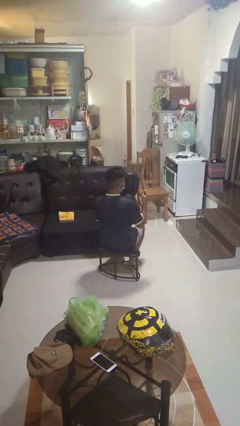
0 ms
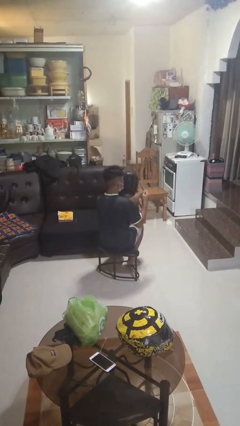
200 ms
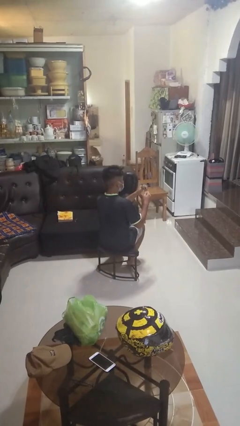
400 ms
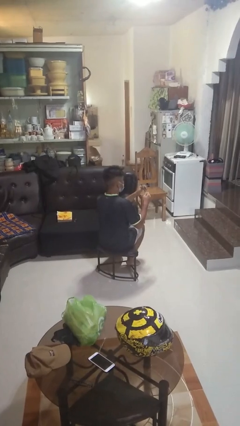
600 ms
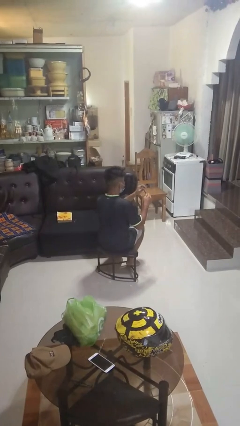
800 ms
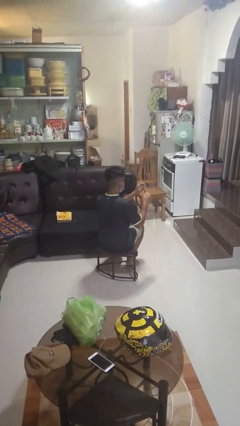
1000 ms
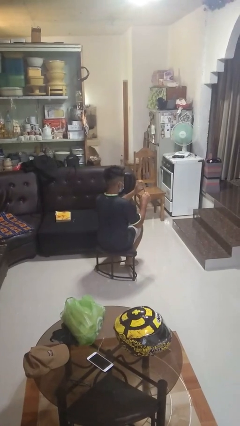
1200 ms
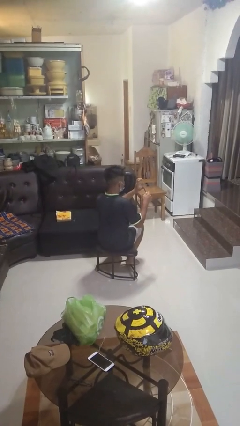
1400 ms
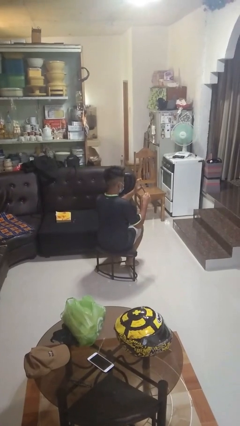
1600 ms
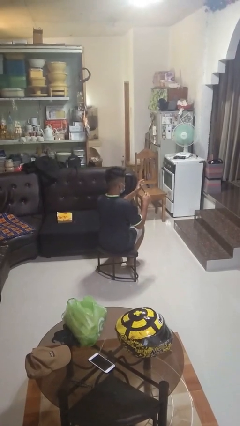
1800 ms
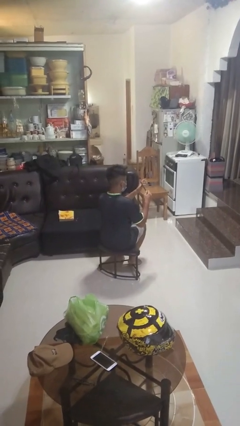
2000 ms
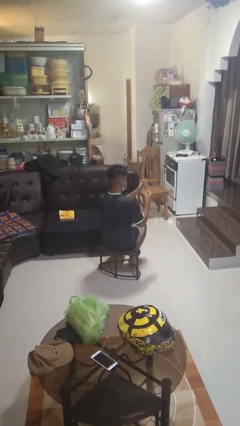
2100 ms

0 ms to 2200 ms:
person files fingernails

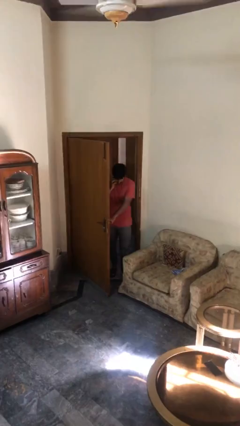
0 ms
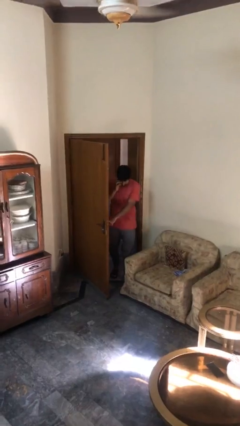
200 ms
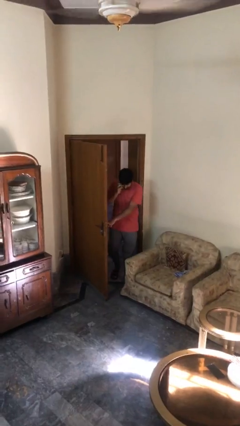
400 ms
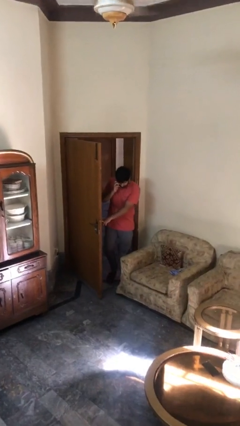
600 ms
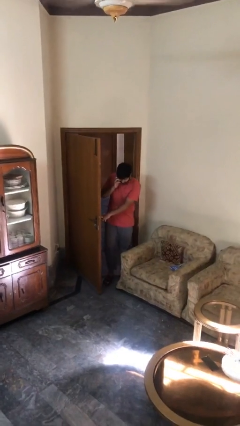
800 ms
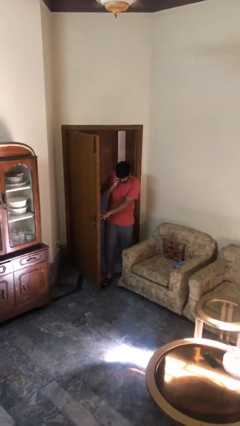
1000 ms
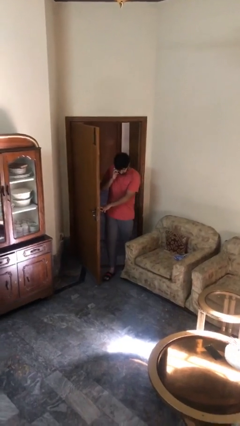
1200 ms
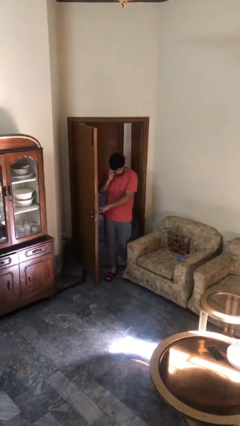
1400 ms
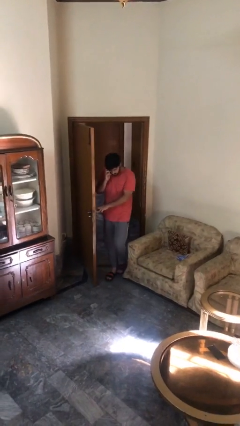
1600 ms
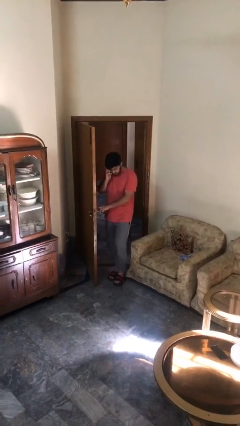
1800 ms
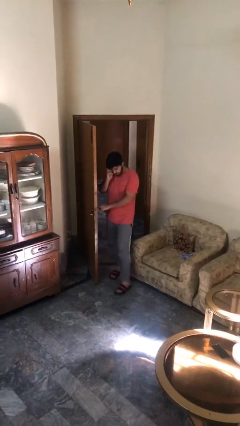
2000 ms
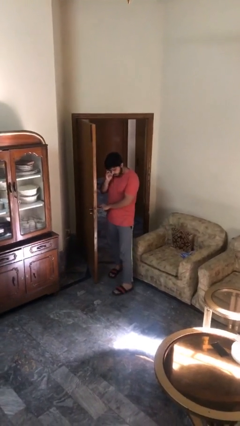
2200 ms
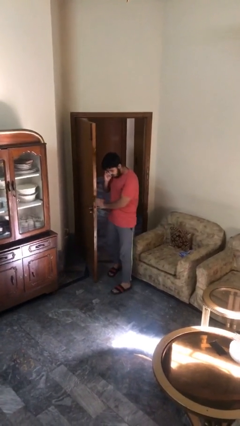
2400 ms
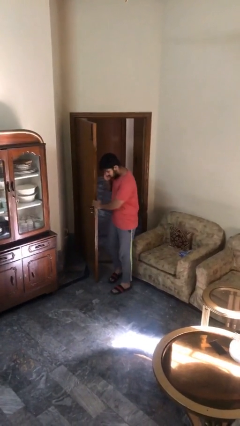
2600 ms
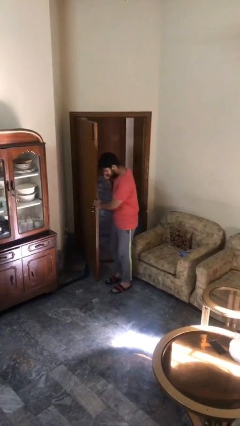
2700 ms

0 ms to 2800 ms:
person enters scene through structure

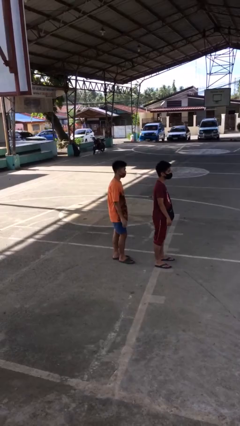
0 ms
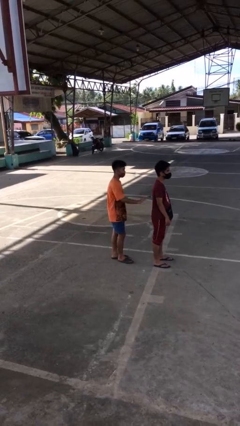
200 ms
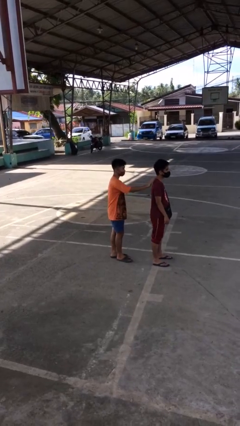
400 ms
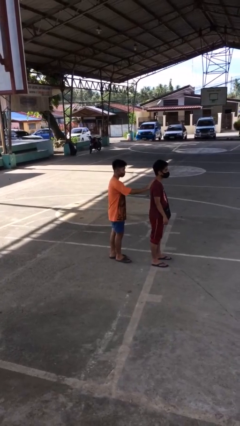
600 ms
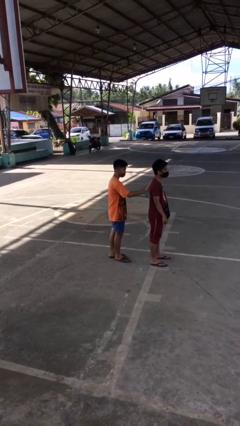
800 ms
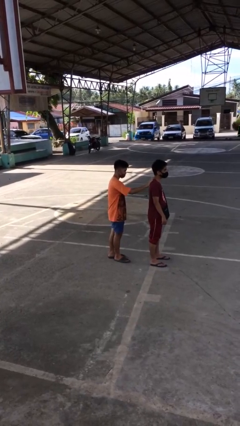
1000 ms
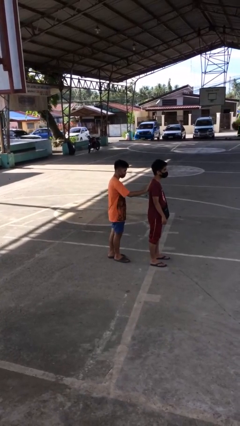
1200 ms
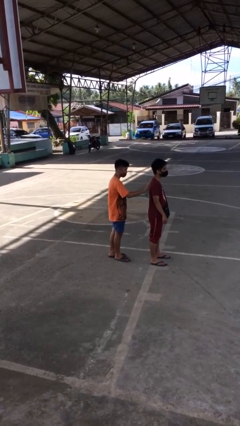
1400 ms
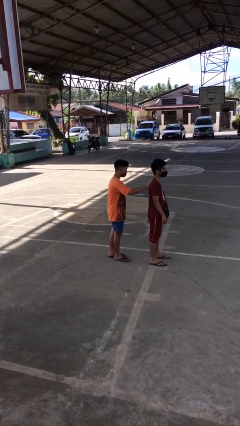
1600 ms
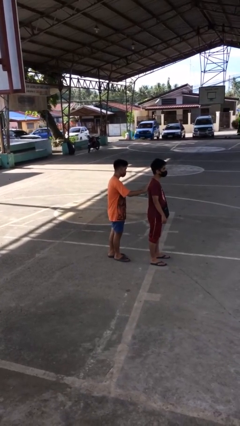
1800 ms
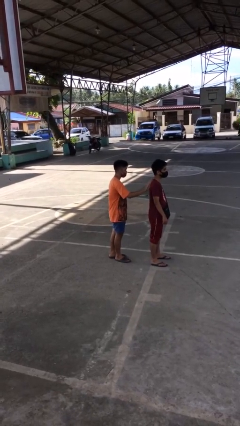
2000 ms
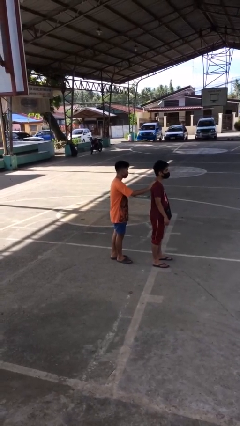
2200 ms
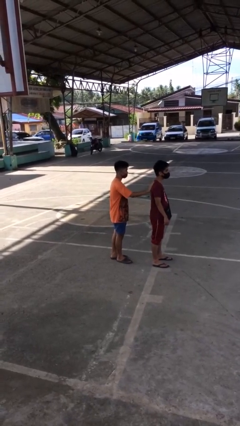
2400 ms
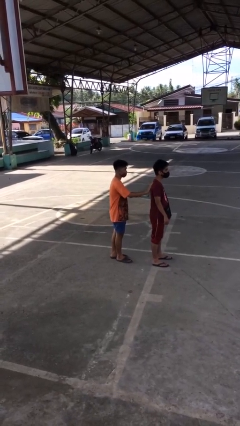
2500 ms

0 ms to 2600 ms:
person touches back of person

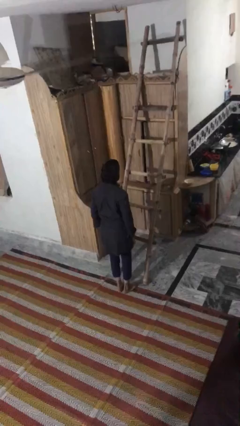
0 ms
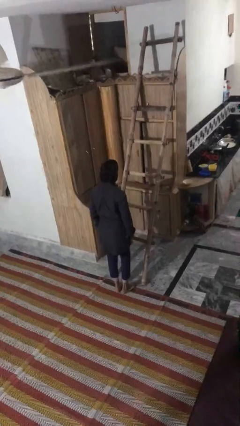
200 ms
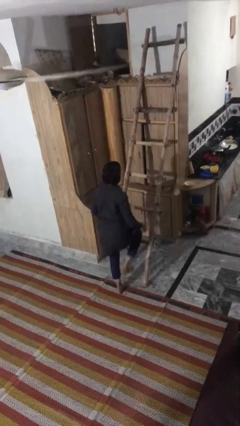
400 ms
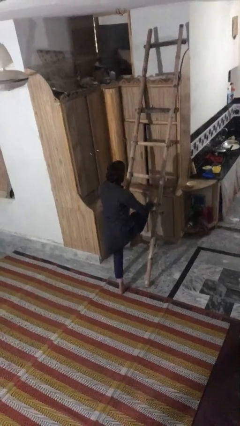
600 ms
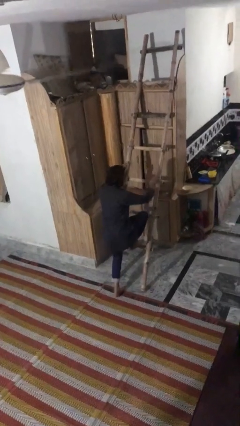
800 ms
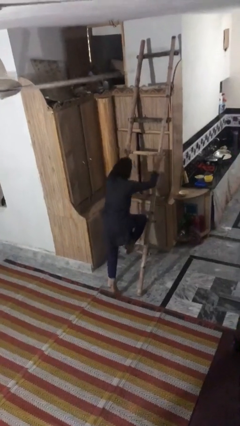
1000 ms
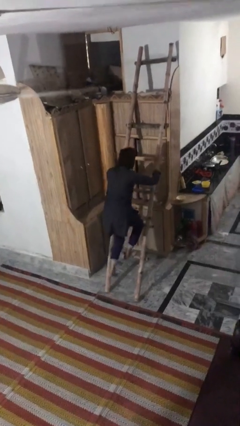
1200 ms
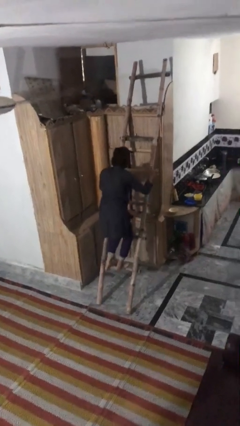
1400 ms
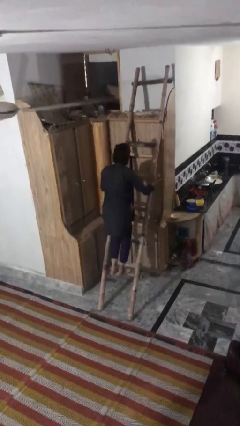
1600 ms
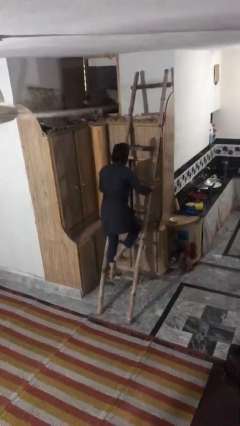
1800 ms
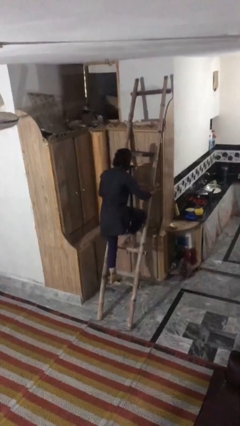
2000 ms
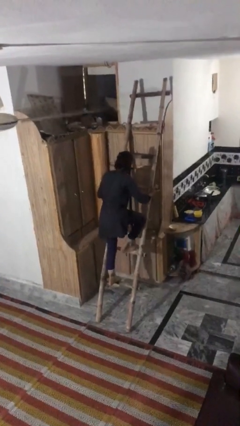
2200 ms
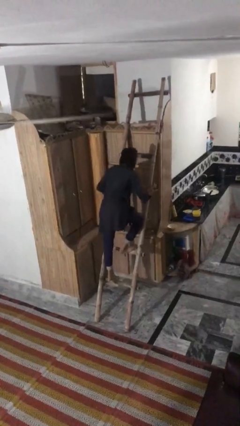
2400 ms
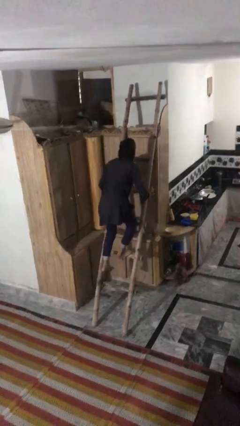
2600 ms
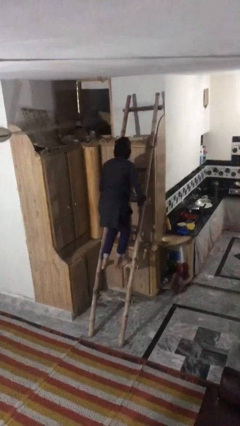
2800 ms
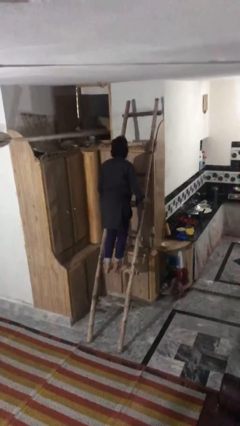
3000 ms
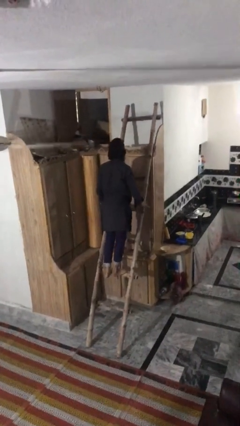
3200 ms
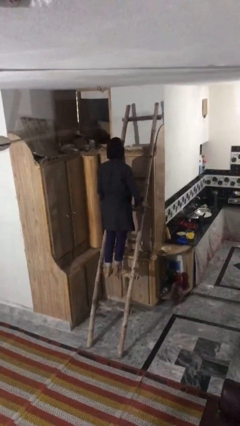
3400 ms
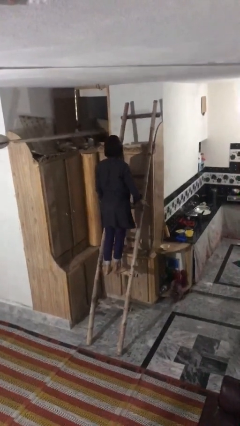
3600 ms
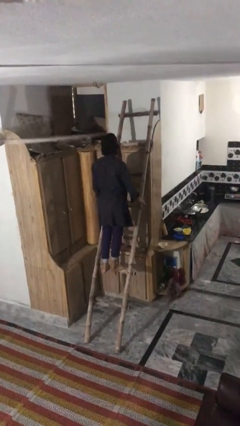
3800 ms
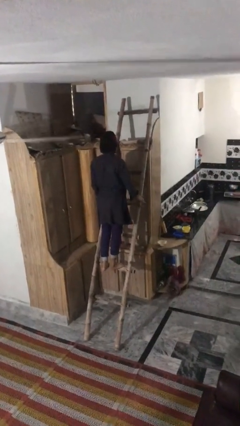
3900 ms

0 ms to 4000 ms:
person climbs up ladder

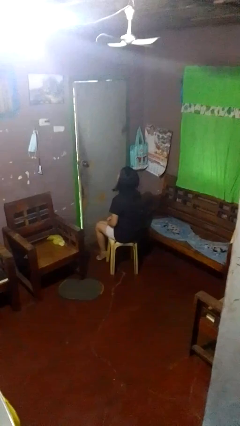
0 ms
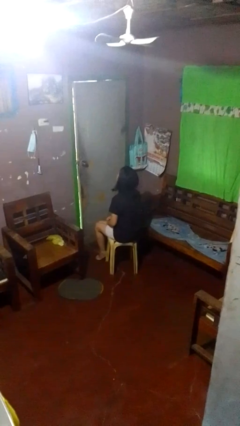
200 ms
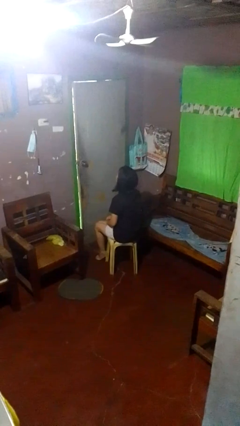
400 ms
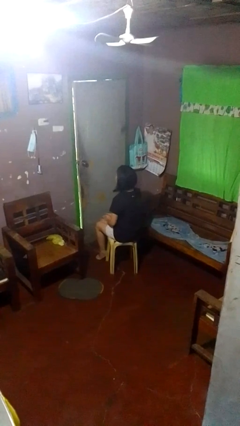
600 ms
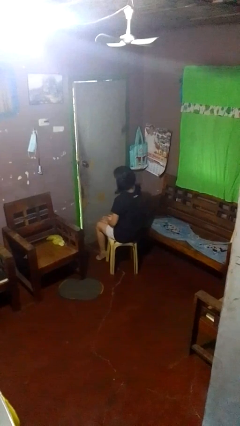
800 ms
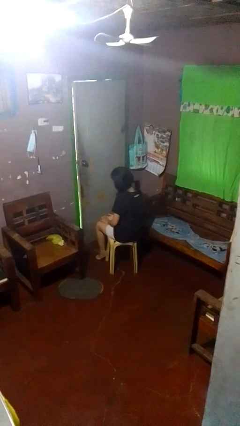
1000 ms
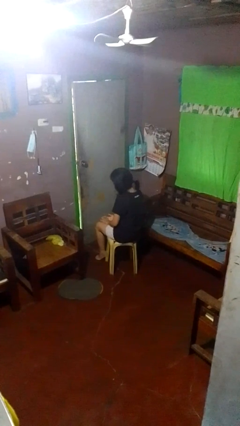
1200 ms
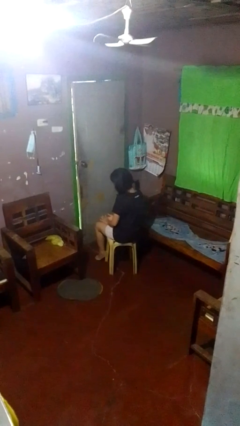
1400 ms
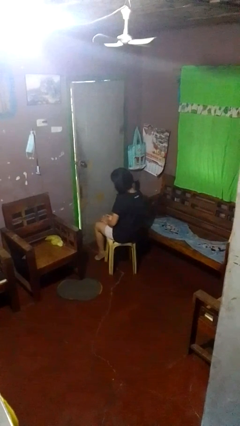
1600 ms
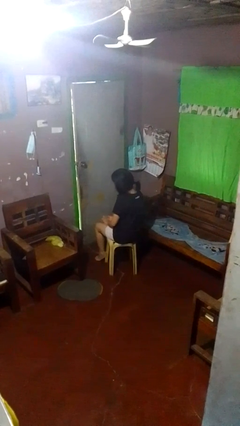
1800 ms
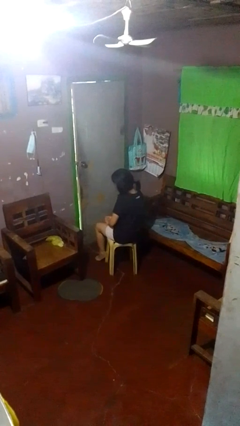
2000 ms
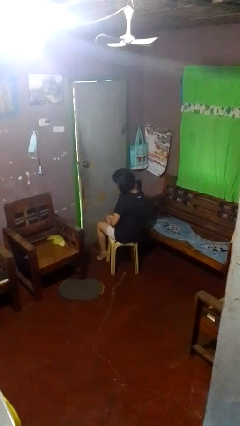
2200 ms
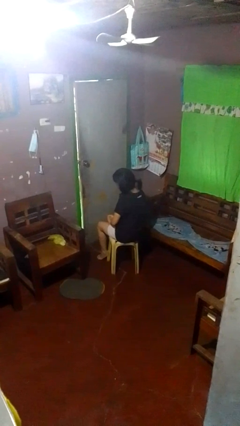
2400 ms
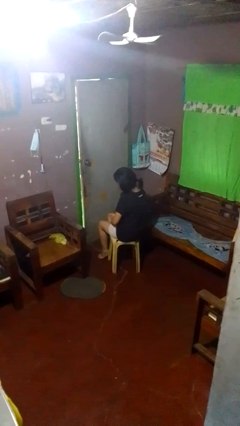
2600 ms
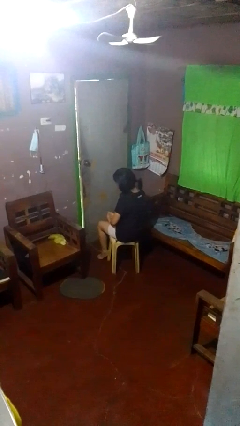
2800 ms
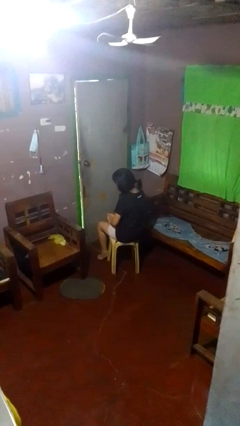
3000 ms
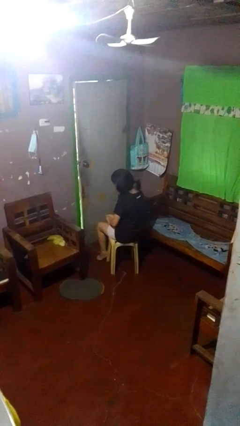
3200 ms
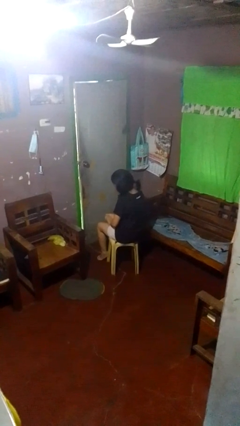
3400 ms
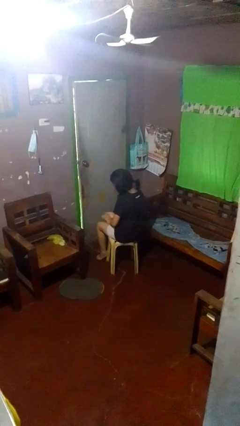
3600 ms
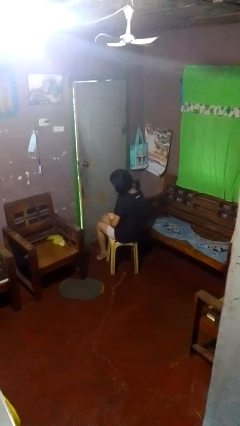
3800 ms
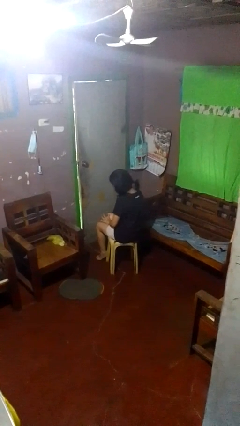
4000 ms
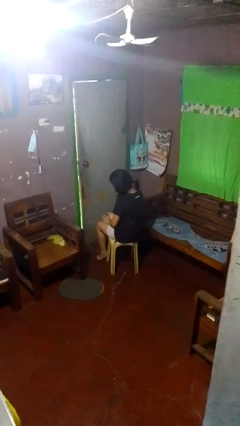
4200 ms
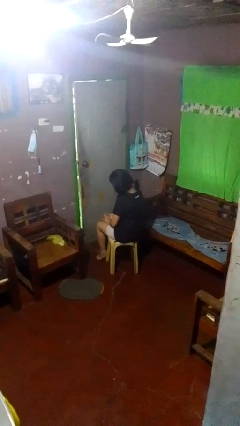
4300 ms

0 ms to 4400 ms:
person looks at hands in lap

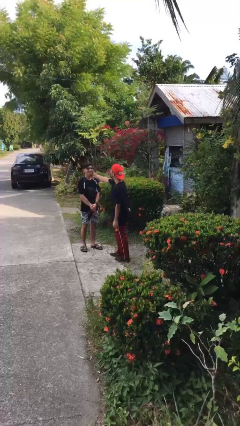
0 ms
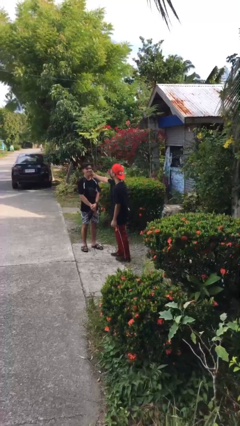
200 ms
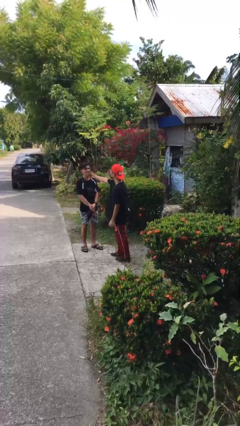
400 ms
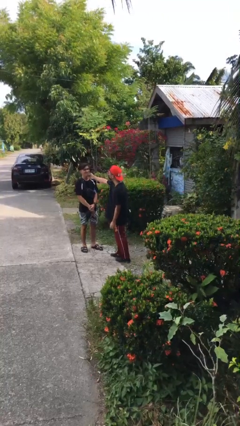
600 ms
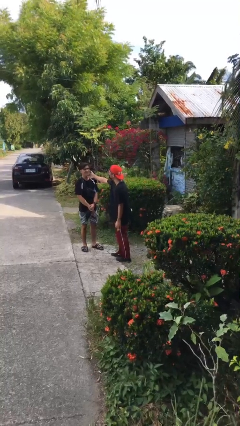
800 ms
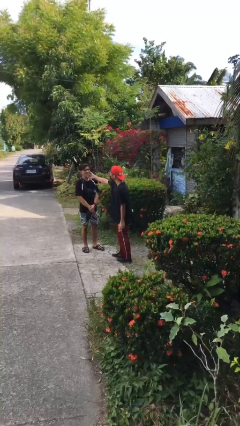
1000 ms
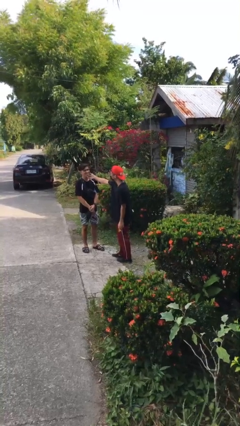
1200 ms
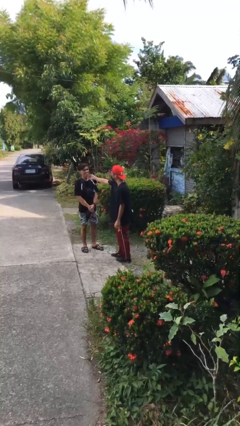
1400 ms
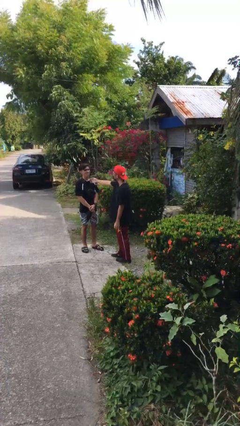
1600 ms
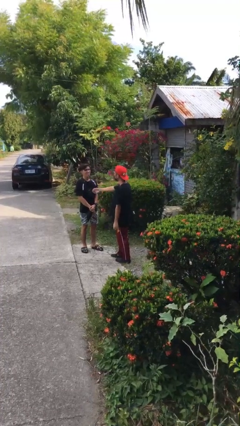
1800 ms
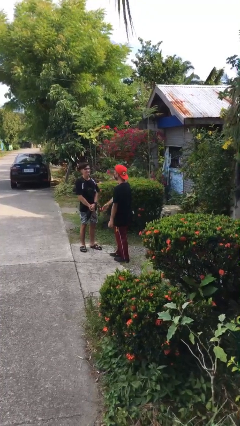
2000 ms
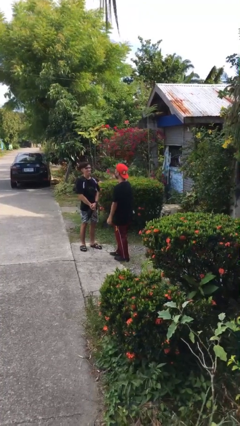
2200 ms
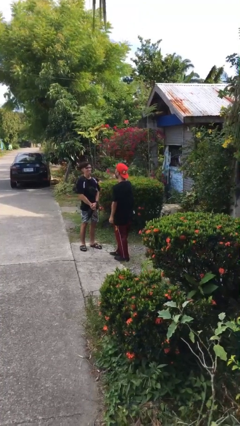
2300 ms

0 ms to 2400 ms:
person touches face of person
